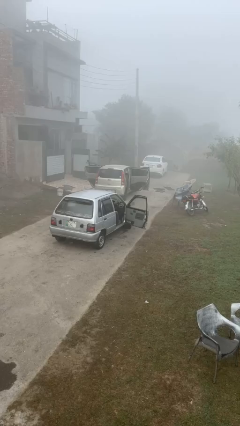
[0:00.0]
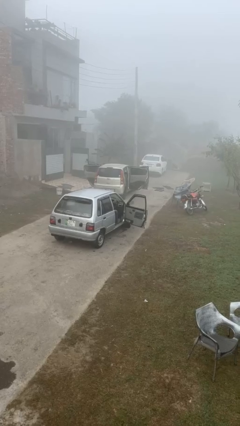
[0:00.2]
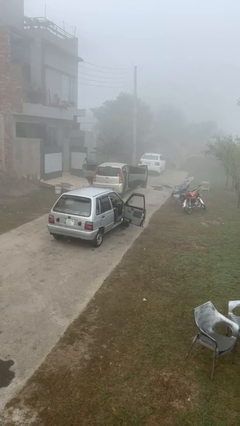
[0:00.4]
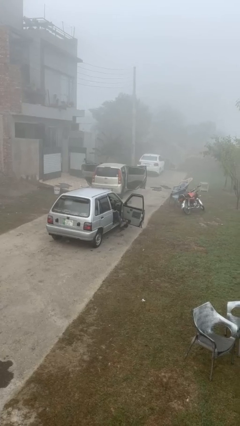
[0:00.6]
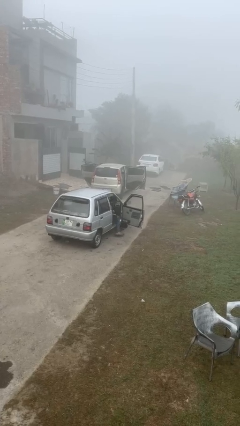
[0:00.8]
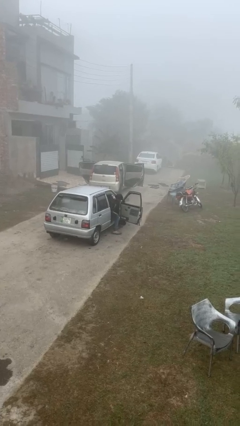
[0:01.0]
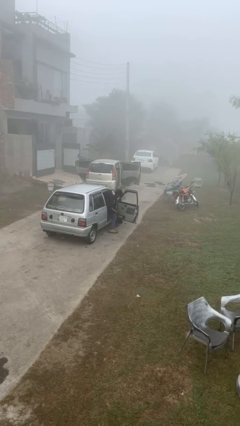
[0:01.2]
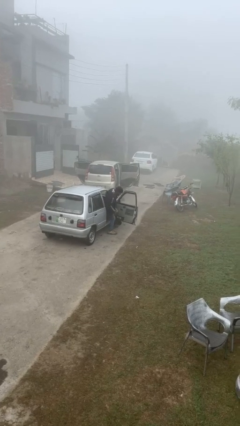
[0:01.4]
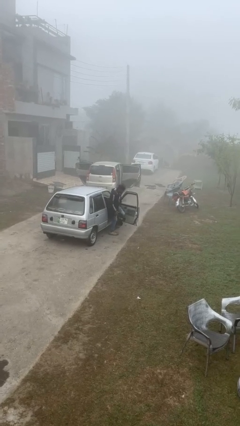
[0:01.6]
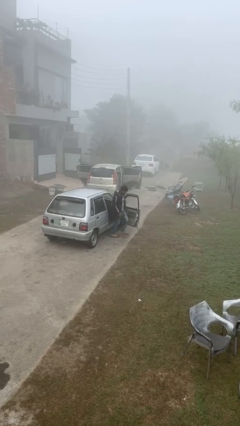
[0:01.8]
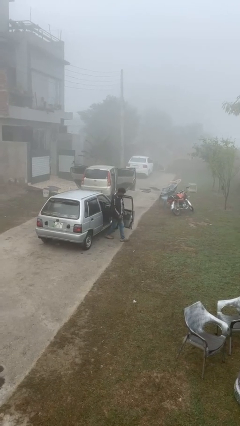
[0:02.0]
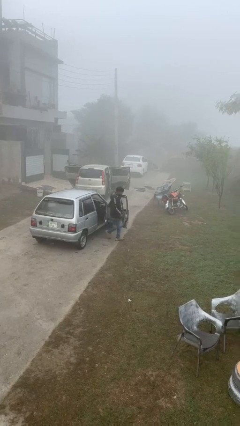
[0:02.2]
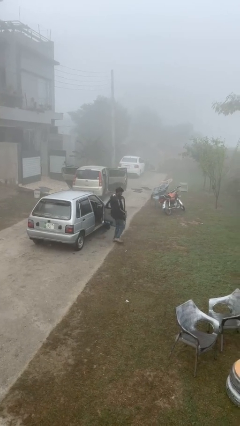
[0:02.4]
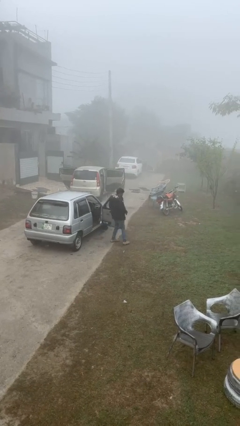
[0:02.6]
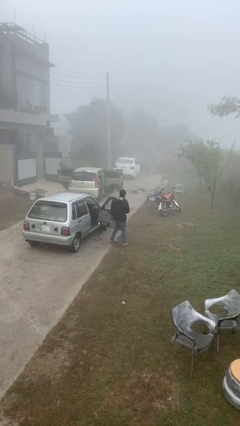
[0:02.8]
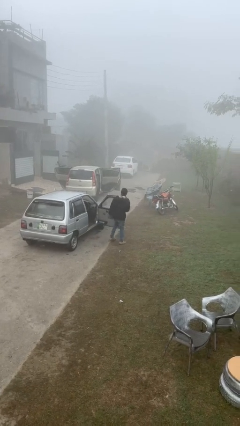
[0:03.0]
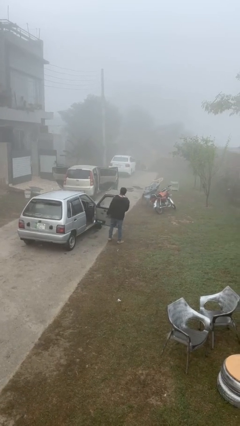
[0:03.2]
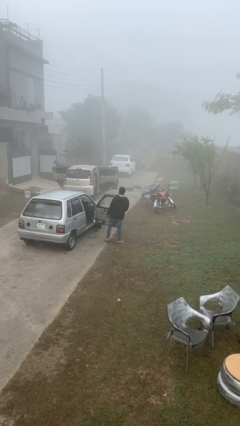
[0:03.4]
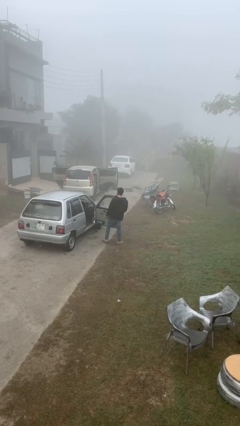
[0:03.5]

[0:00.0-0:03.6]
person exits car

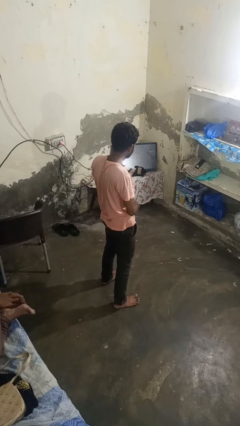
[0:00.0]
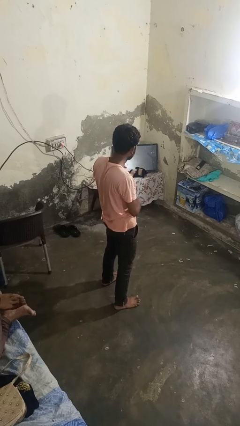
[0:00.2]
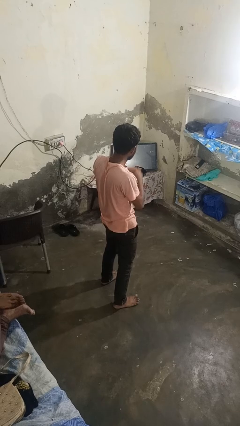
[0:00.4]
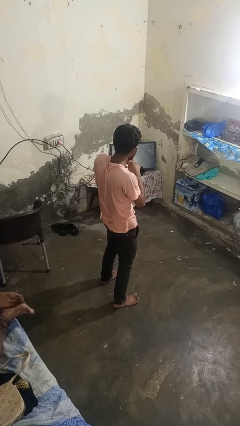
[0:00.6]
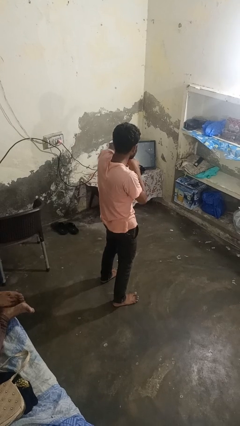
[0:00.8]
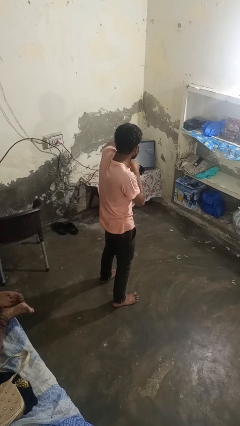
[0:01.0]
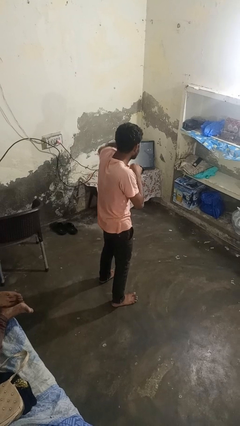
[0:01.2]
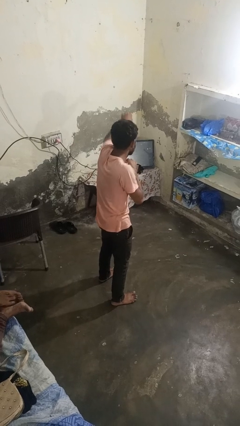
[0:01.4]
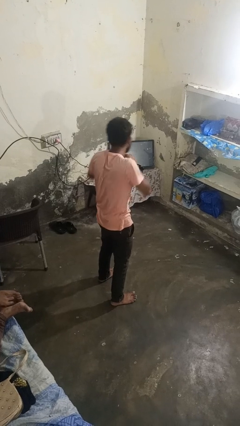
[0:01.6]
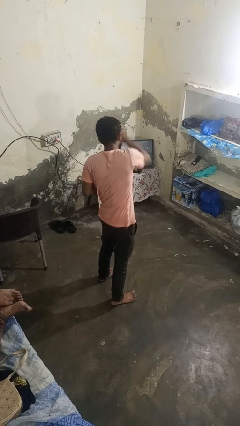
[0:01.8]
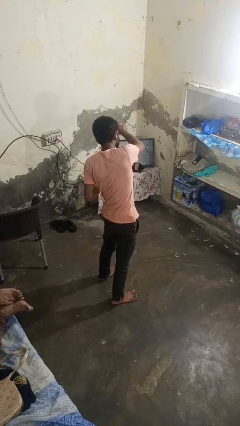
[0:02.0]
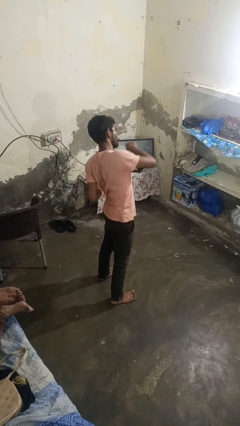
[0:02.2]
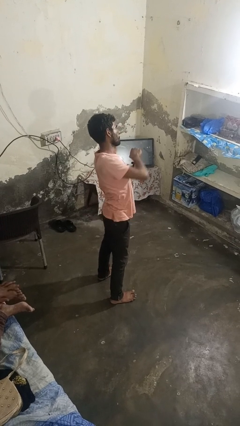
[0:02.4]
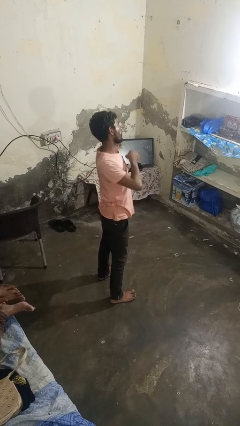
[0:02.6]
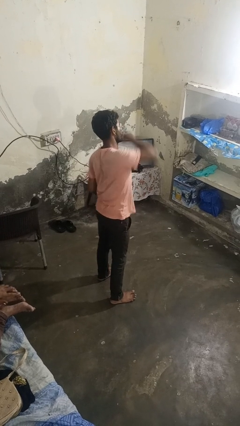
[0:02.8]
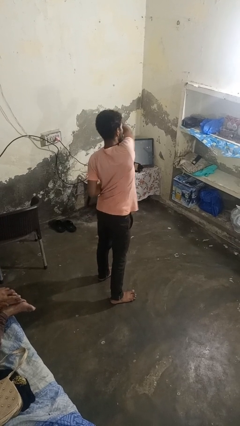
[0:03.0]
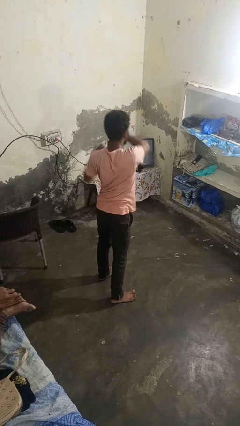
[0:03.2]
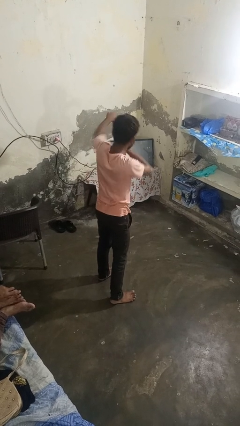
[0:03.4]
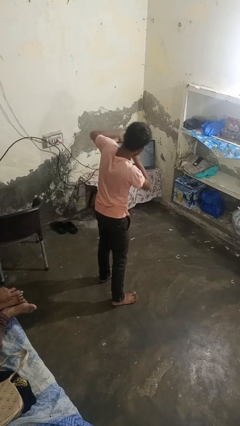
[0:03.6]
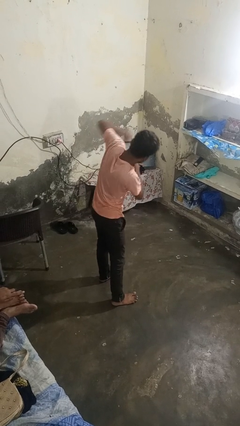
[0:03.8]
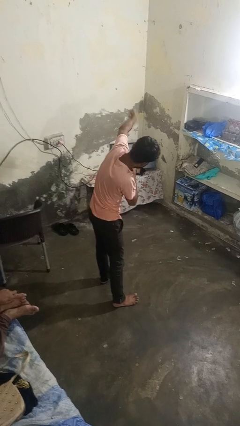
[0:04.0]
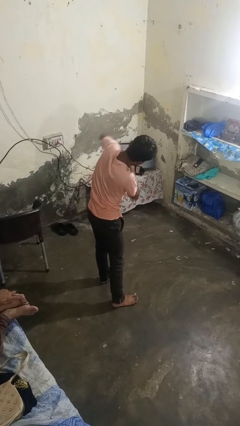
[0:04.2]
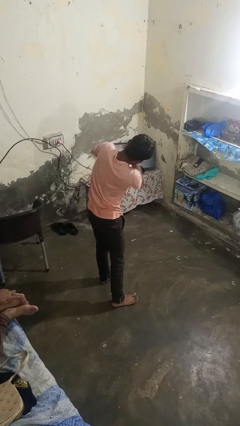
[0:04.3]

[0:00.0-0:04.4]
person punches

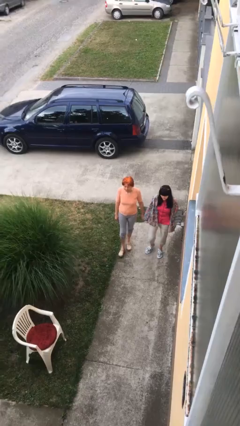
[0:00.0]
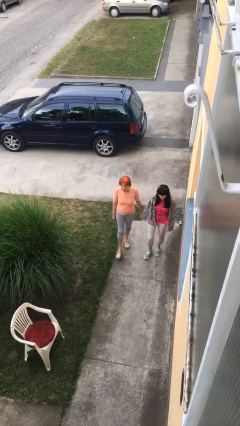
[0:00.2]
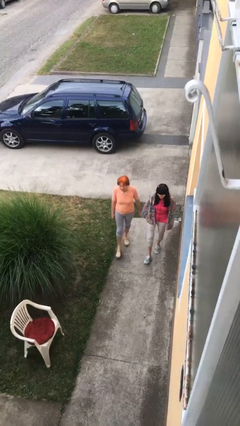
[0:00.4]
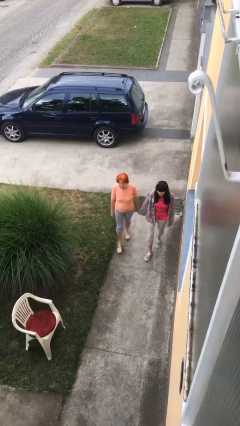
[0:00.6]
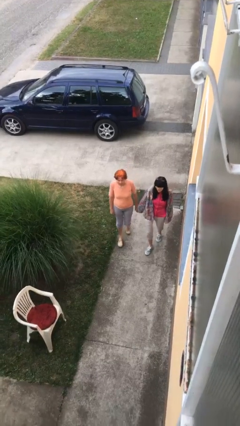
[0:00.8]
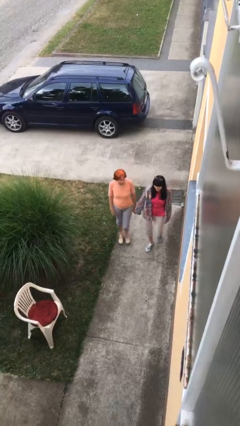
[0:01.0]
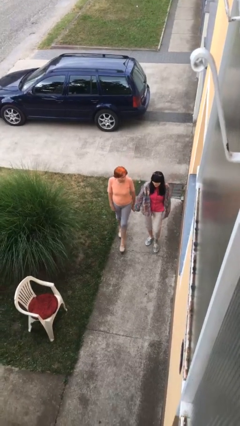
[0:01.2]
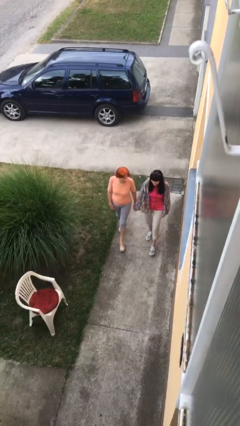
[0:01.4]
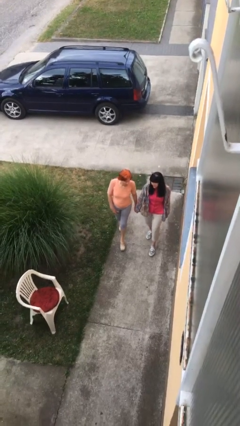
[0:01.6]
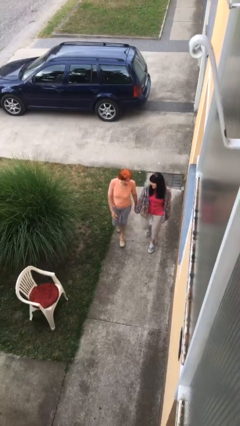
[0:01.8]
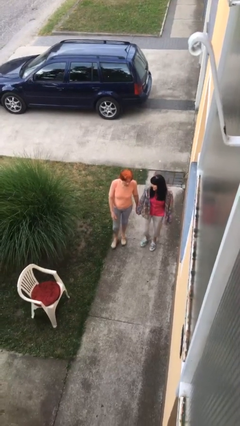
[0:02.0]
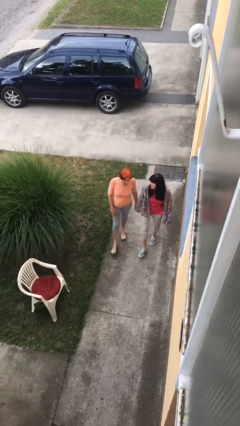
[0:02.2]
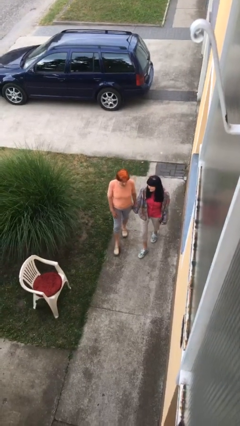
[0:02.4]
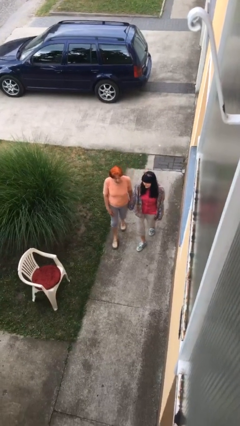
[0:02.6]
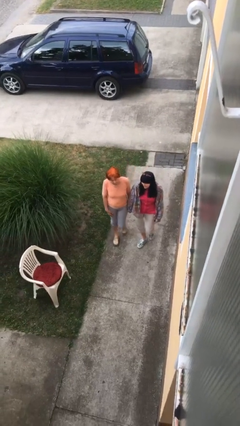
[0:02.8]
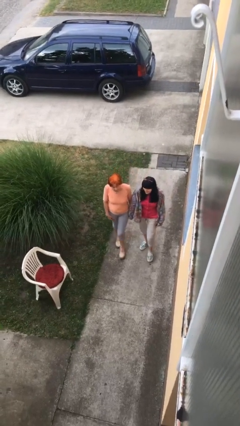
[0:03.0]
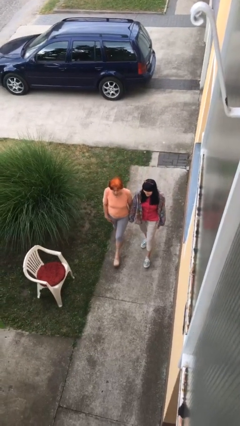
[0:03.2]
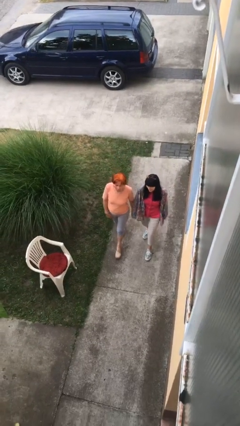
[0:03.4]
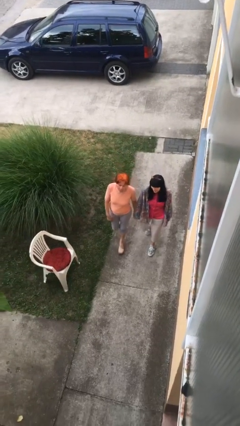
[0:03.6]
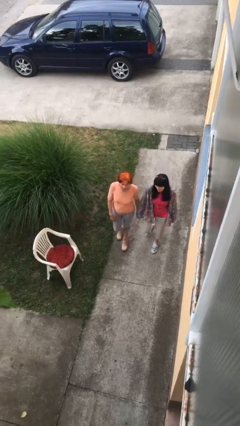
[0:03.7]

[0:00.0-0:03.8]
person holds hand

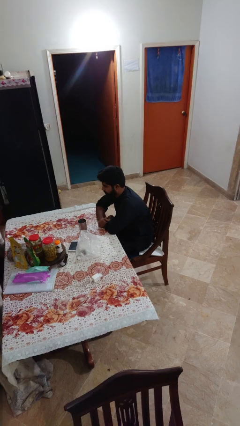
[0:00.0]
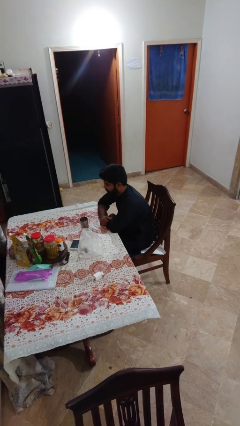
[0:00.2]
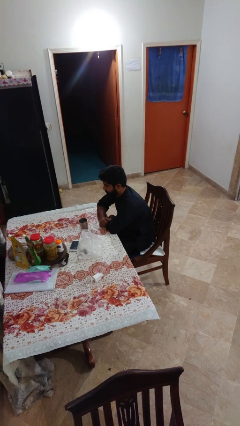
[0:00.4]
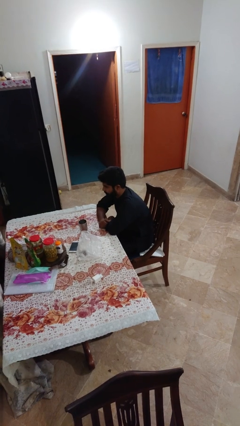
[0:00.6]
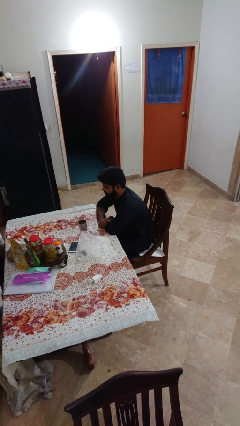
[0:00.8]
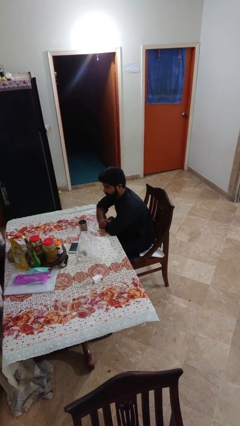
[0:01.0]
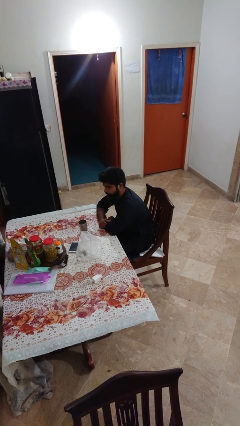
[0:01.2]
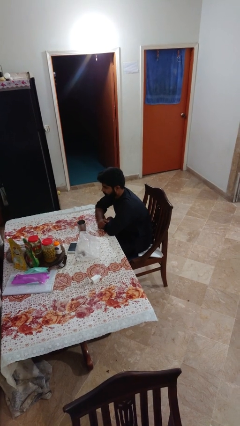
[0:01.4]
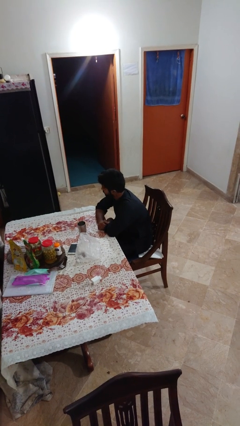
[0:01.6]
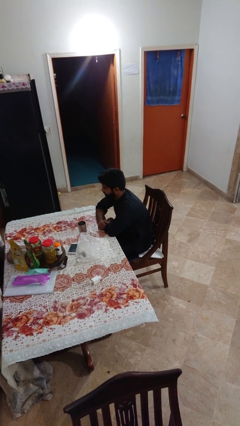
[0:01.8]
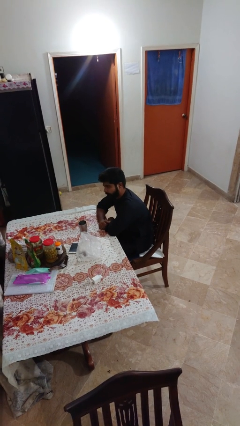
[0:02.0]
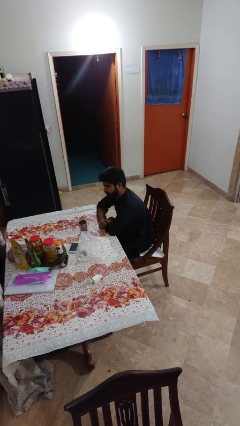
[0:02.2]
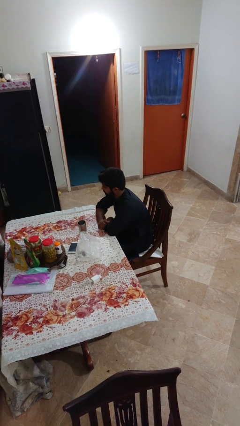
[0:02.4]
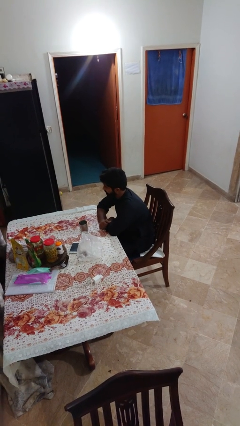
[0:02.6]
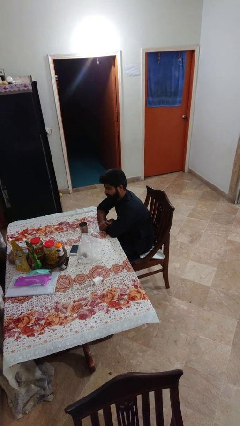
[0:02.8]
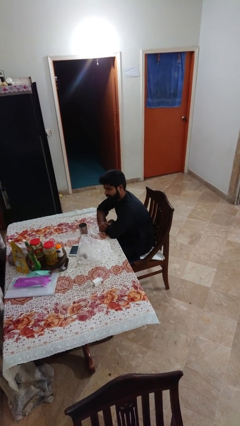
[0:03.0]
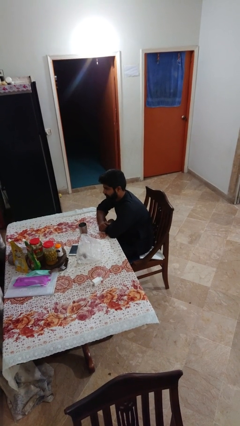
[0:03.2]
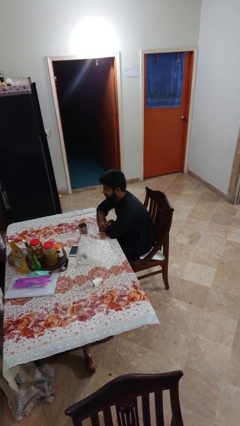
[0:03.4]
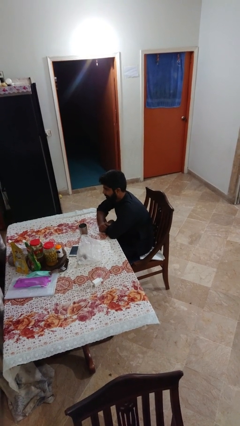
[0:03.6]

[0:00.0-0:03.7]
person shakes head

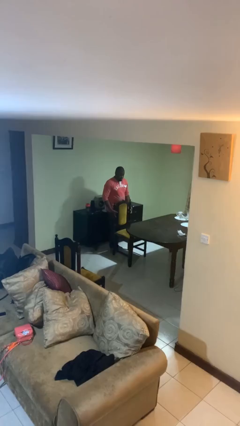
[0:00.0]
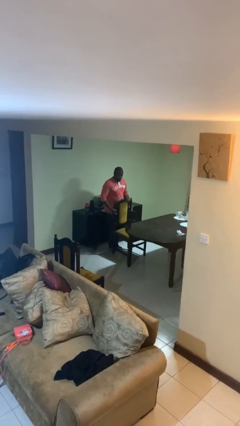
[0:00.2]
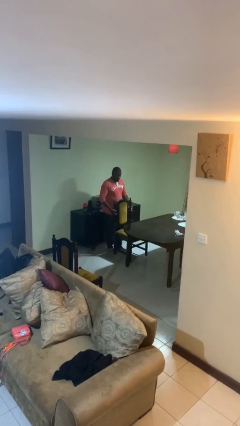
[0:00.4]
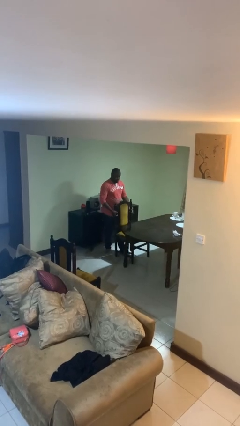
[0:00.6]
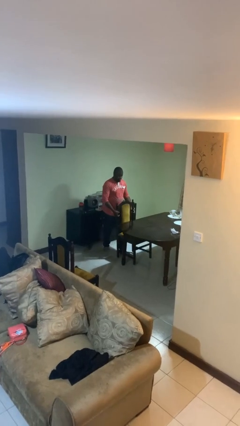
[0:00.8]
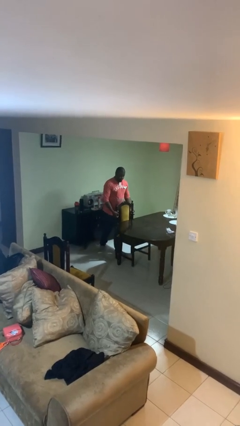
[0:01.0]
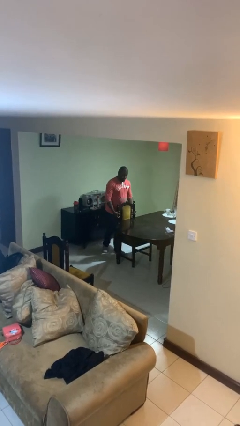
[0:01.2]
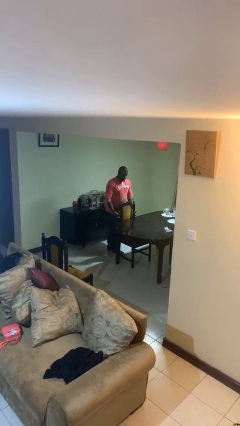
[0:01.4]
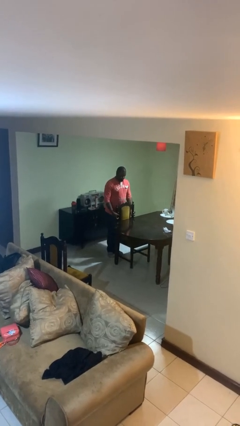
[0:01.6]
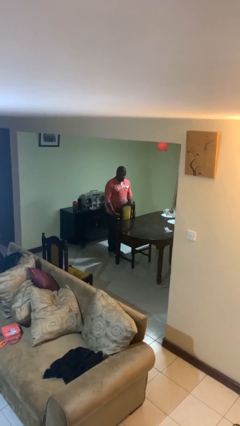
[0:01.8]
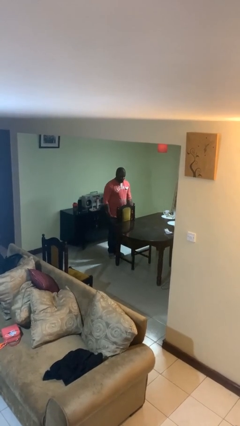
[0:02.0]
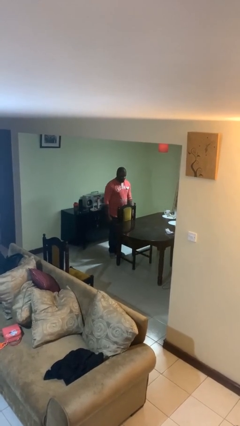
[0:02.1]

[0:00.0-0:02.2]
person pushes in chair

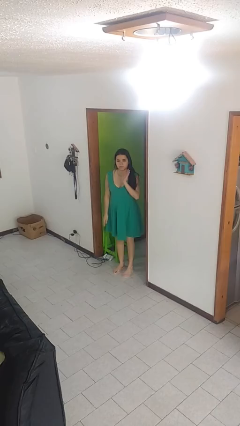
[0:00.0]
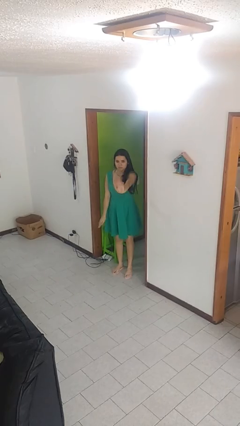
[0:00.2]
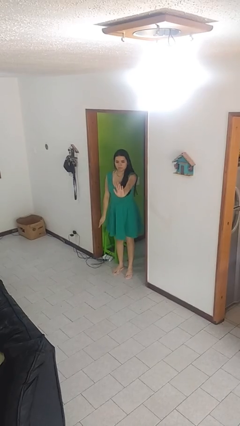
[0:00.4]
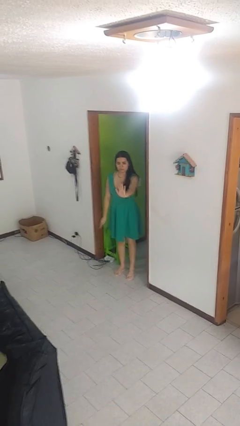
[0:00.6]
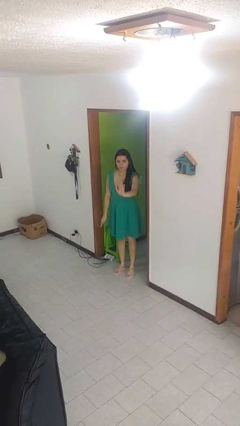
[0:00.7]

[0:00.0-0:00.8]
person gestures stop
